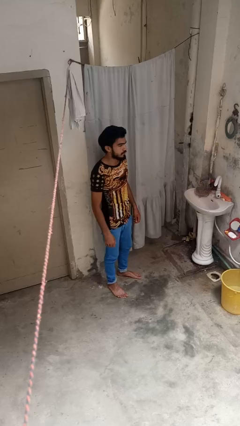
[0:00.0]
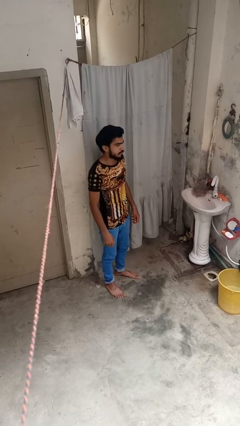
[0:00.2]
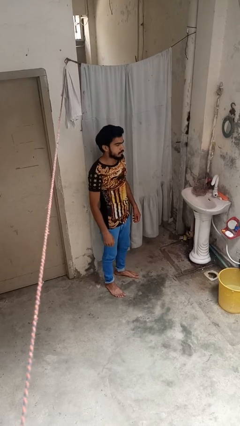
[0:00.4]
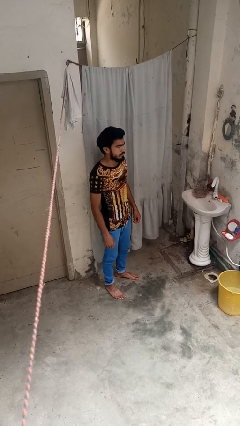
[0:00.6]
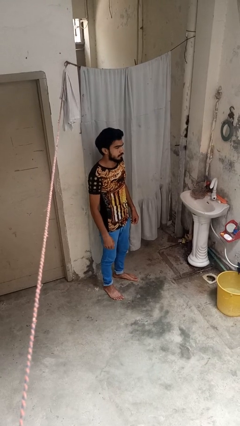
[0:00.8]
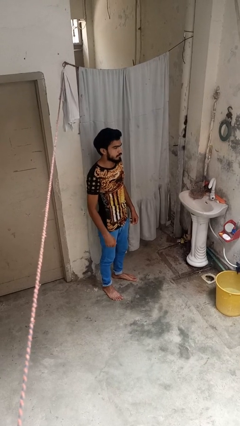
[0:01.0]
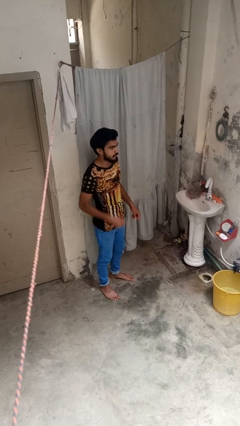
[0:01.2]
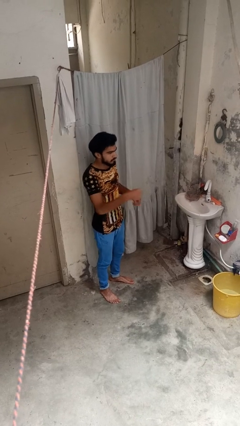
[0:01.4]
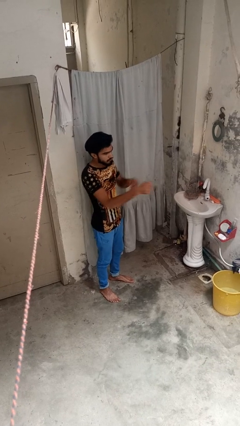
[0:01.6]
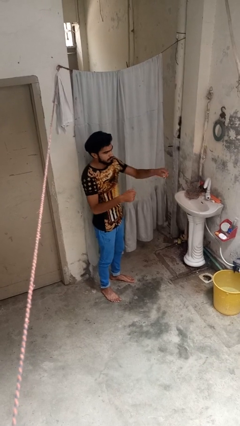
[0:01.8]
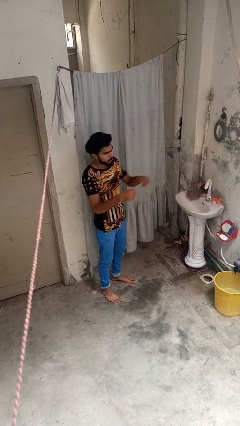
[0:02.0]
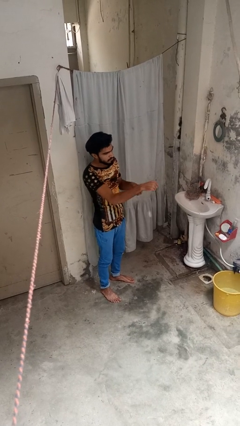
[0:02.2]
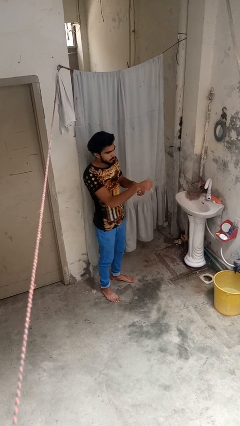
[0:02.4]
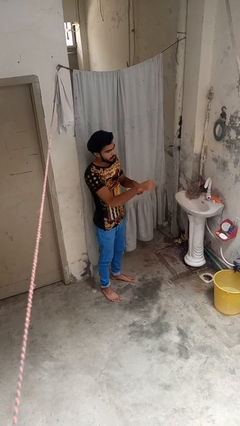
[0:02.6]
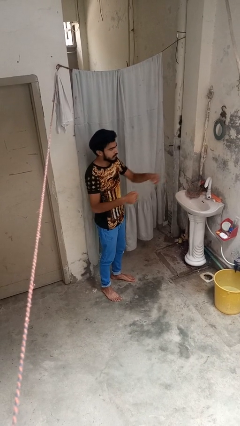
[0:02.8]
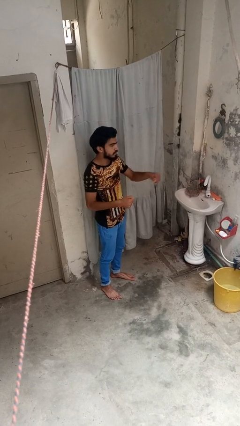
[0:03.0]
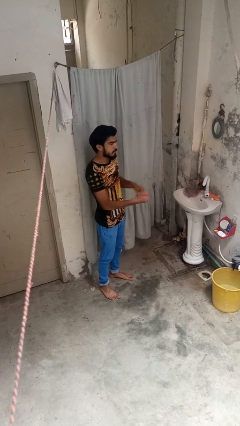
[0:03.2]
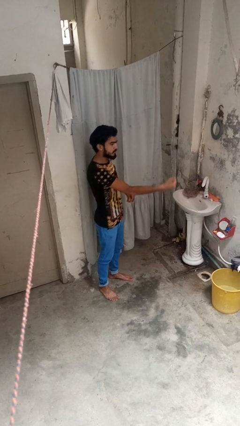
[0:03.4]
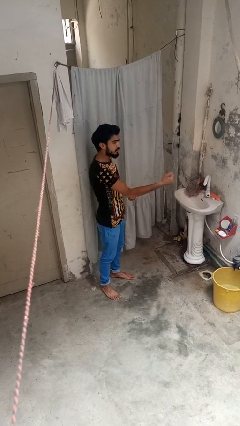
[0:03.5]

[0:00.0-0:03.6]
person punches

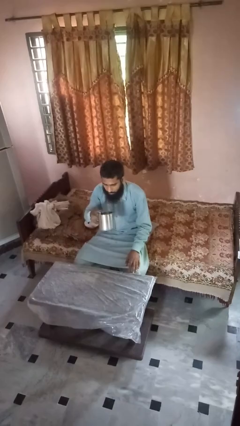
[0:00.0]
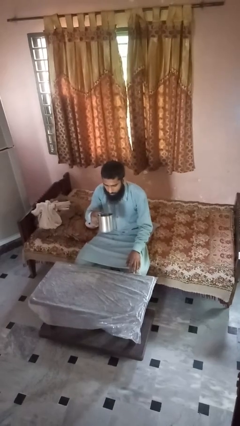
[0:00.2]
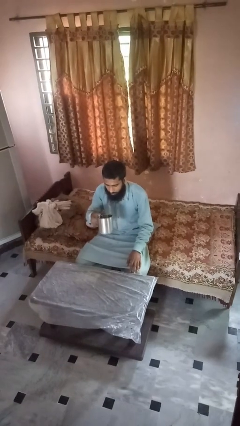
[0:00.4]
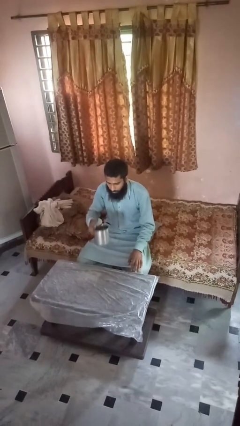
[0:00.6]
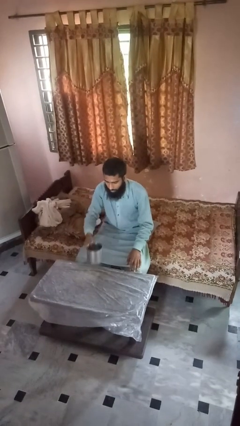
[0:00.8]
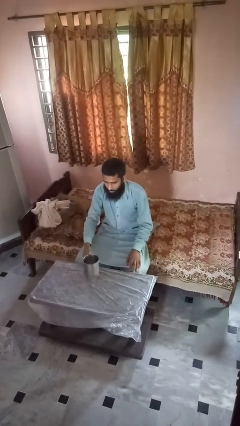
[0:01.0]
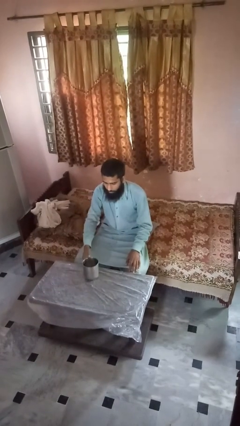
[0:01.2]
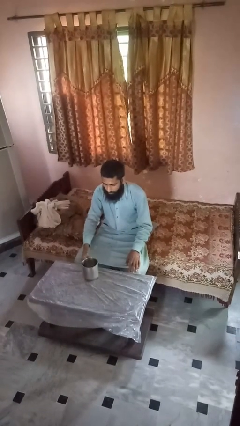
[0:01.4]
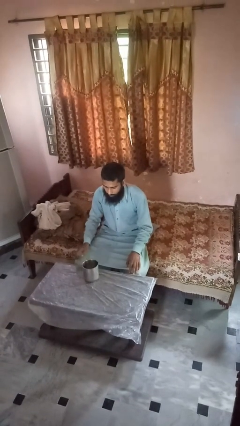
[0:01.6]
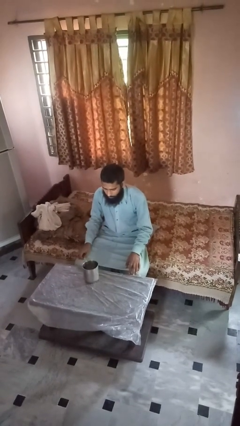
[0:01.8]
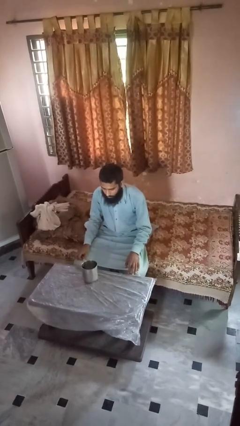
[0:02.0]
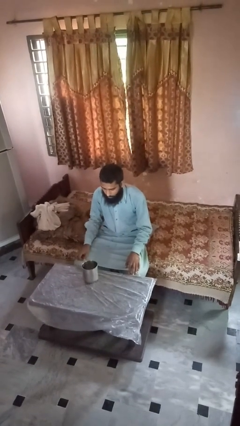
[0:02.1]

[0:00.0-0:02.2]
person puts down object on table

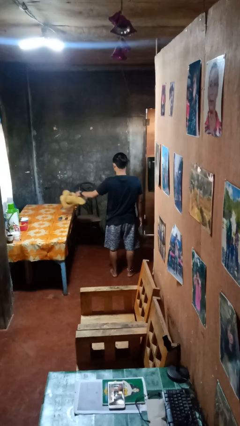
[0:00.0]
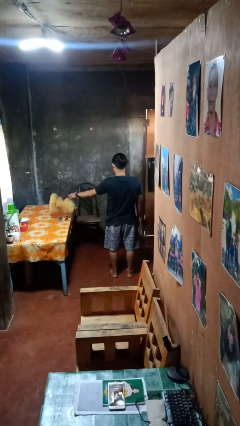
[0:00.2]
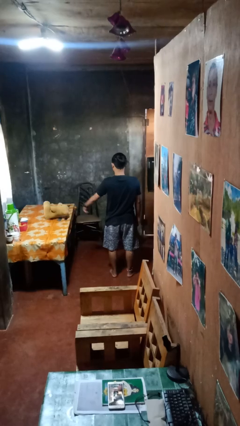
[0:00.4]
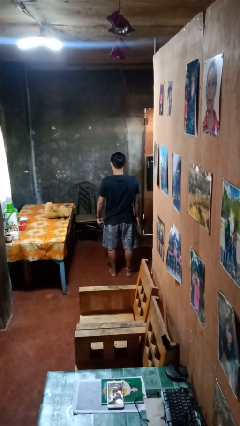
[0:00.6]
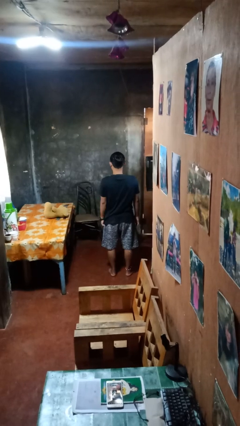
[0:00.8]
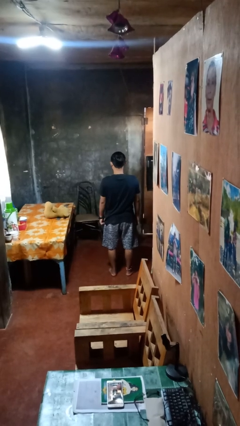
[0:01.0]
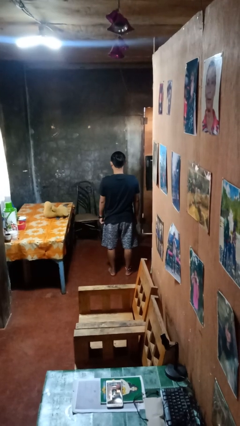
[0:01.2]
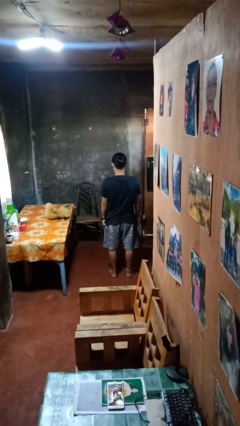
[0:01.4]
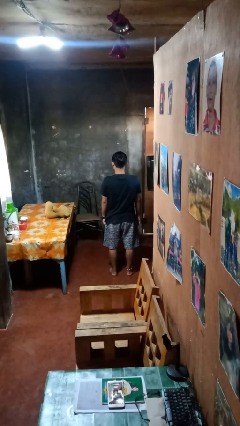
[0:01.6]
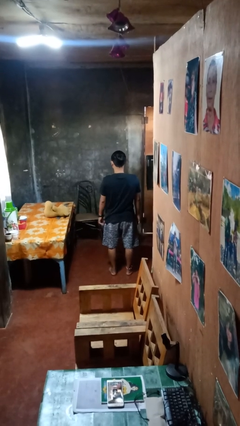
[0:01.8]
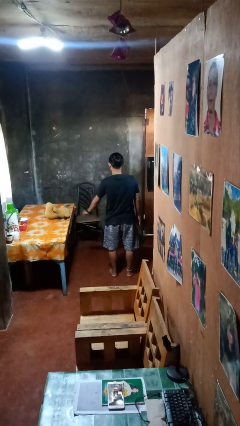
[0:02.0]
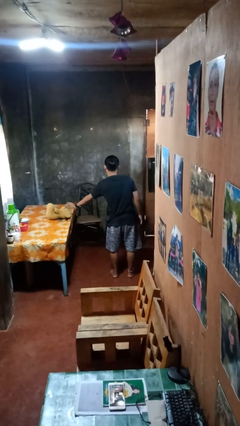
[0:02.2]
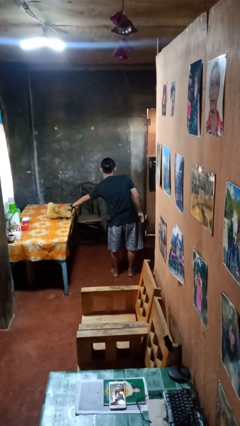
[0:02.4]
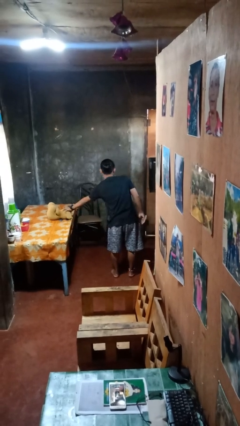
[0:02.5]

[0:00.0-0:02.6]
person throws object on table

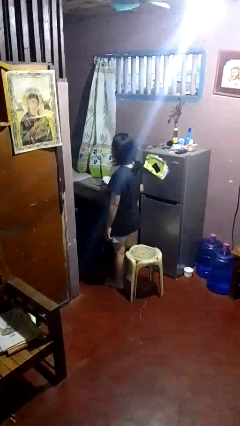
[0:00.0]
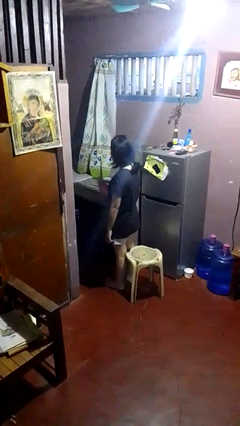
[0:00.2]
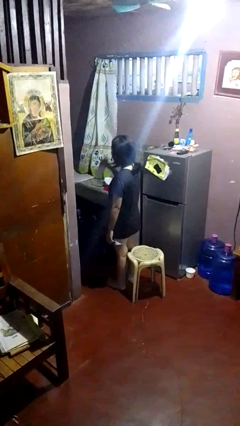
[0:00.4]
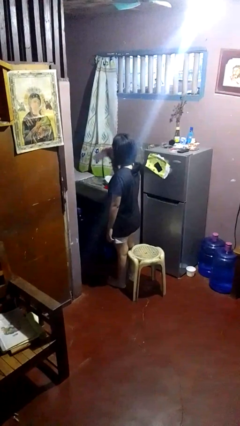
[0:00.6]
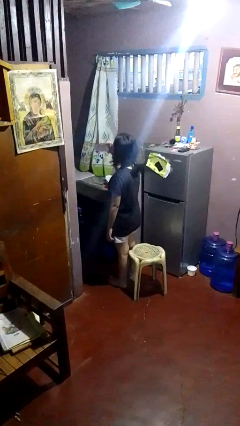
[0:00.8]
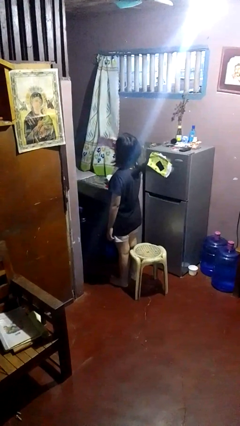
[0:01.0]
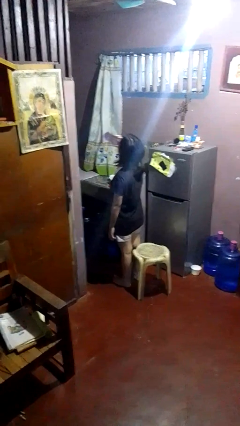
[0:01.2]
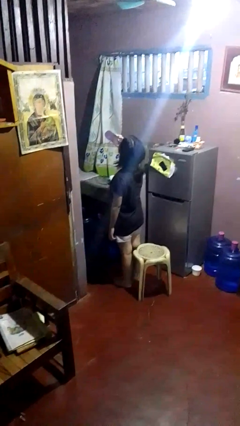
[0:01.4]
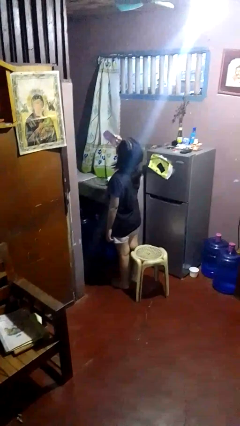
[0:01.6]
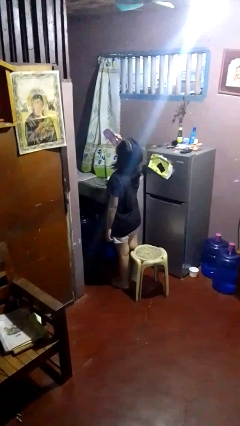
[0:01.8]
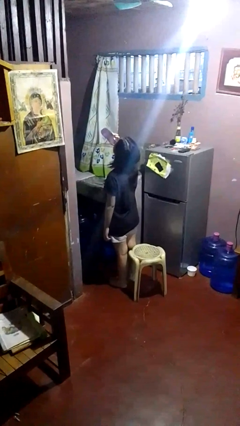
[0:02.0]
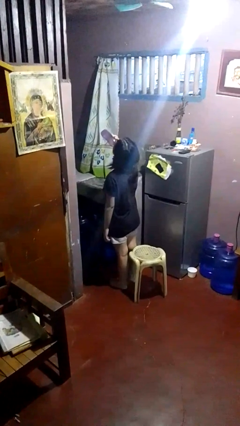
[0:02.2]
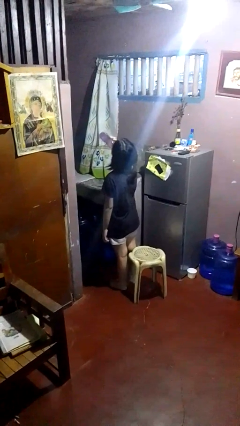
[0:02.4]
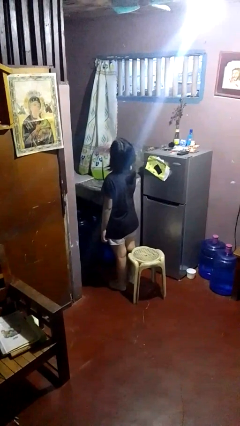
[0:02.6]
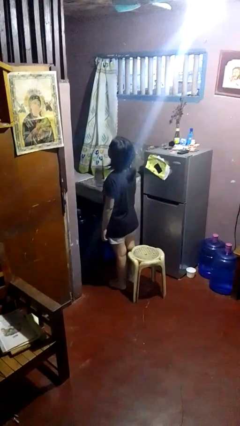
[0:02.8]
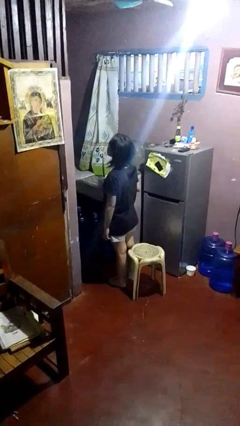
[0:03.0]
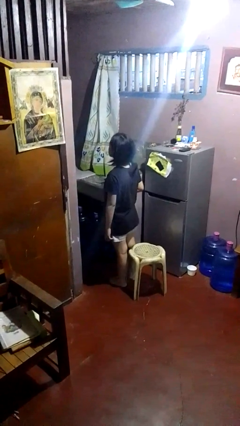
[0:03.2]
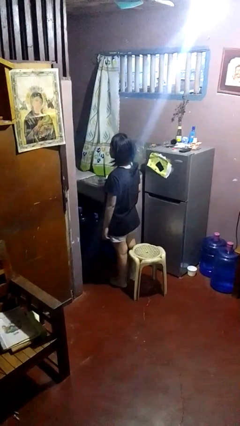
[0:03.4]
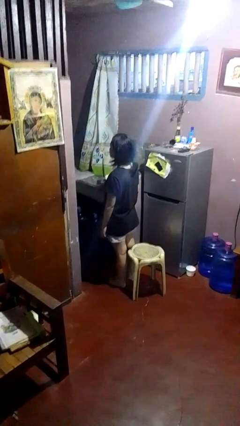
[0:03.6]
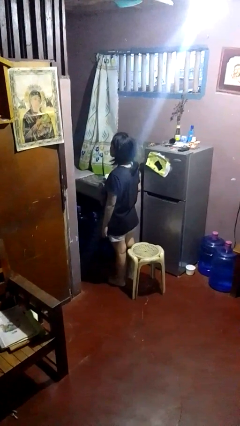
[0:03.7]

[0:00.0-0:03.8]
person drinks from bottle

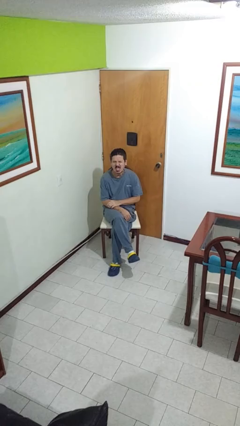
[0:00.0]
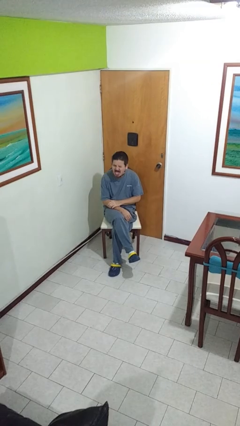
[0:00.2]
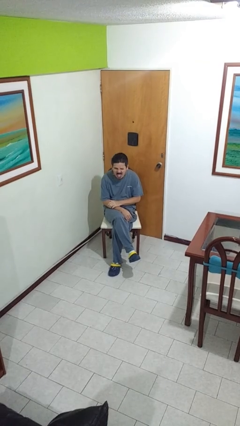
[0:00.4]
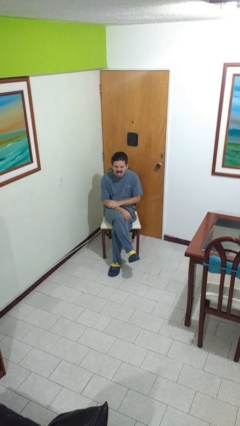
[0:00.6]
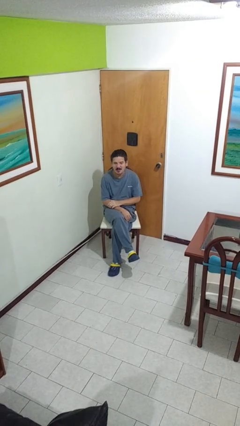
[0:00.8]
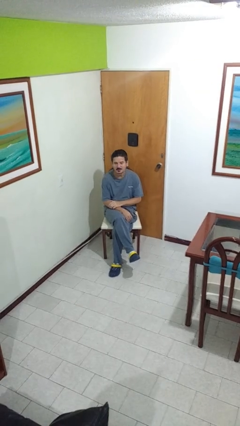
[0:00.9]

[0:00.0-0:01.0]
person sticks out tongue

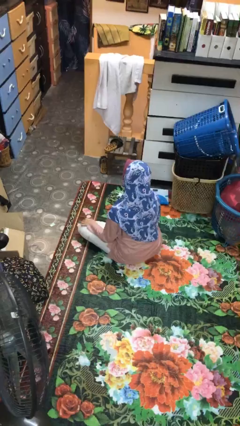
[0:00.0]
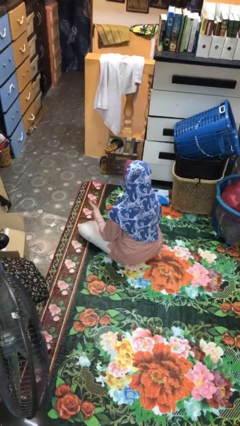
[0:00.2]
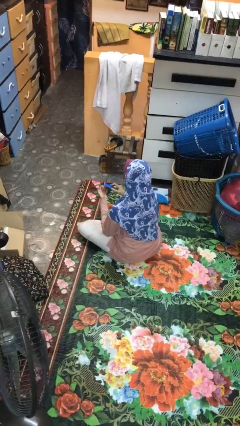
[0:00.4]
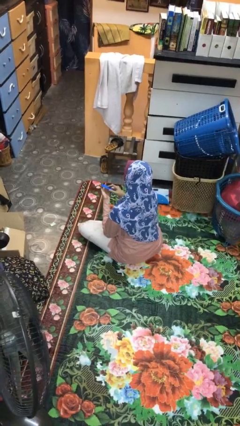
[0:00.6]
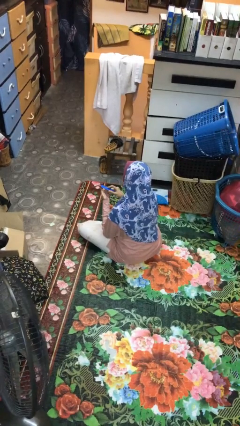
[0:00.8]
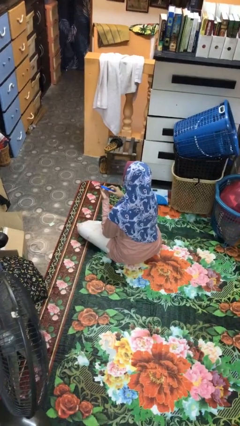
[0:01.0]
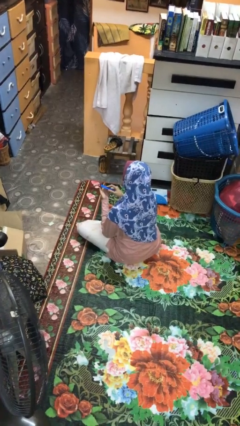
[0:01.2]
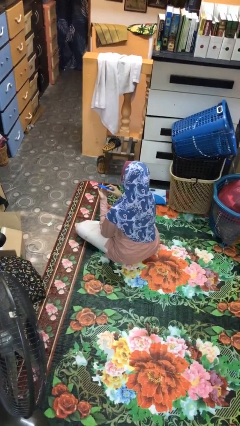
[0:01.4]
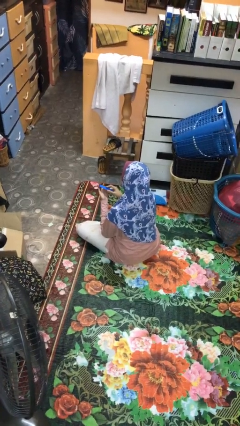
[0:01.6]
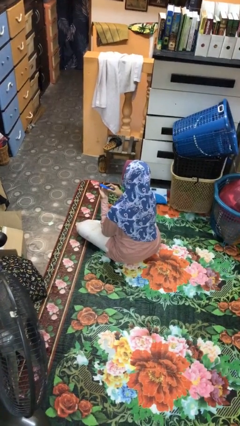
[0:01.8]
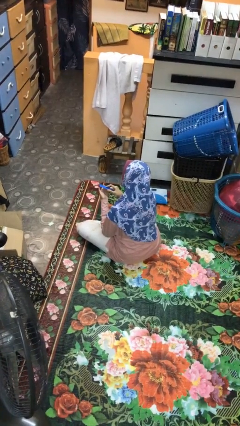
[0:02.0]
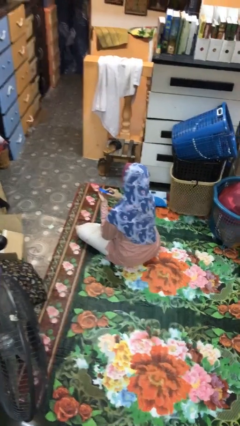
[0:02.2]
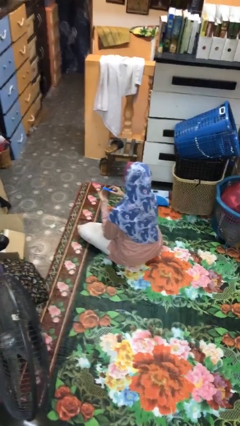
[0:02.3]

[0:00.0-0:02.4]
person files fingernails

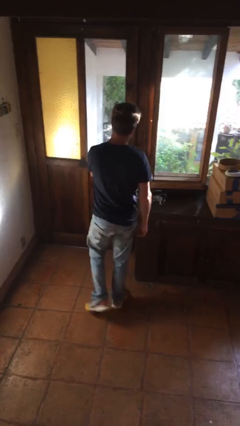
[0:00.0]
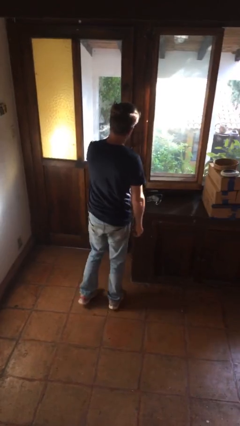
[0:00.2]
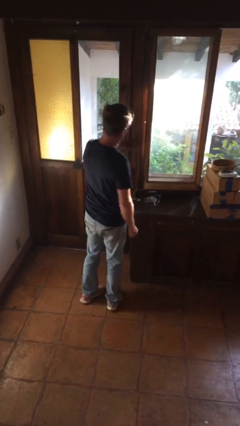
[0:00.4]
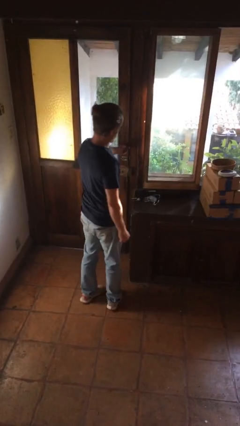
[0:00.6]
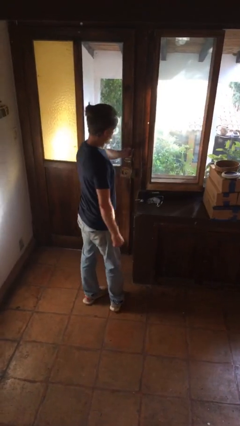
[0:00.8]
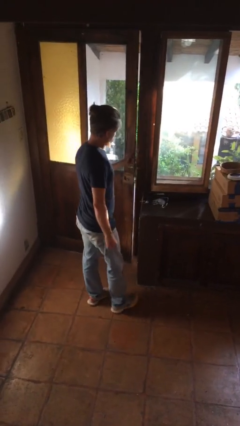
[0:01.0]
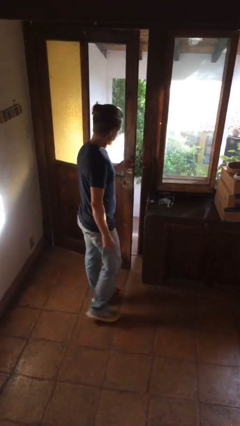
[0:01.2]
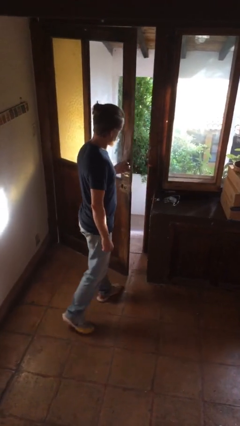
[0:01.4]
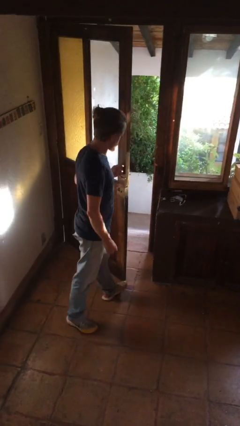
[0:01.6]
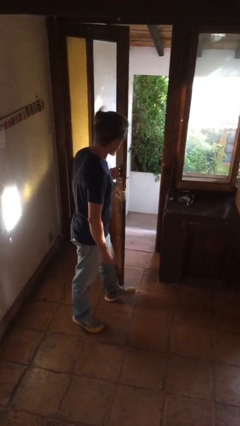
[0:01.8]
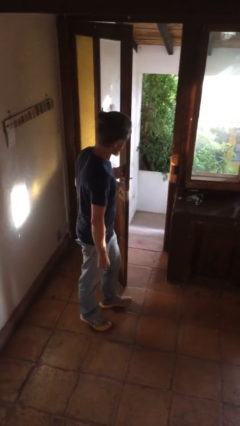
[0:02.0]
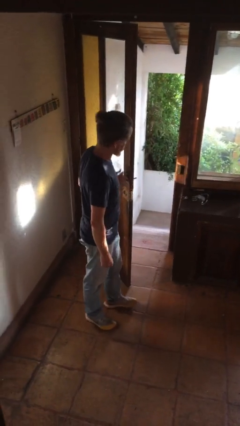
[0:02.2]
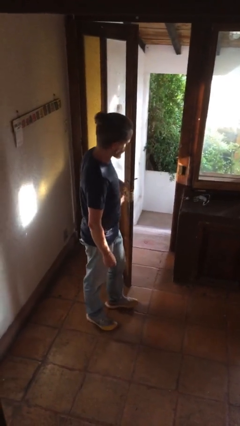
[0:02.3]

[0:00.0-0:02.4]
person opens facility door
